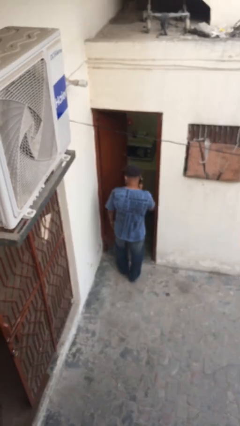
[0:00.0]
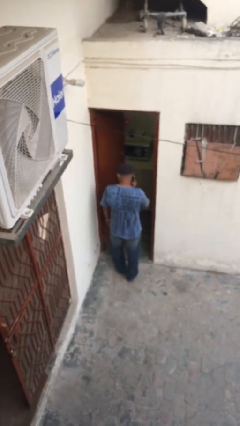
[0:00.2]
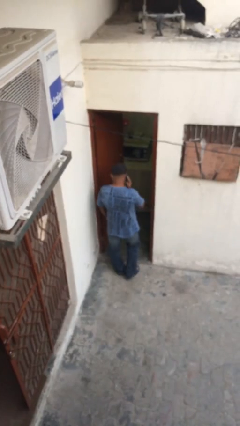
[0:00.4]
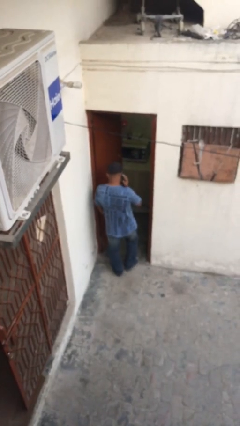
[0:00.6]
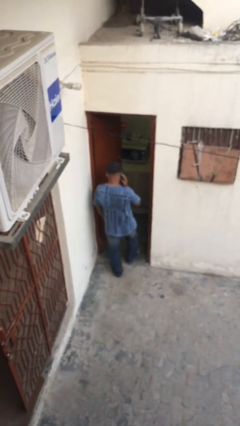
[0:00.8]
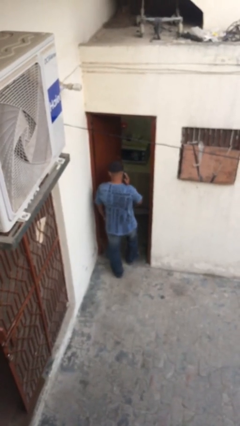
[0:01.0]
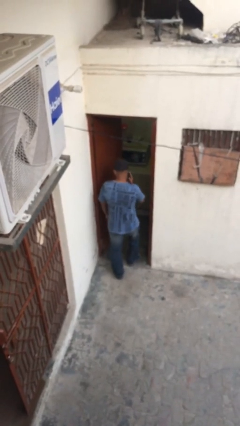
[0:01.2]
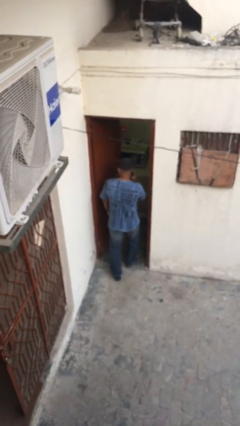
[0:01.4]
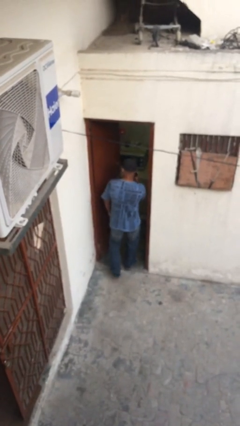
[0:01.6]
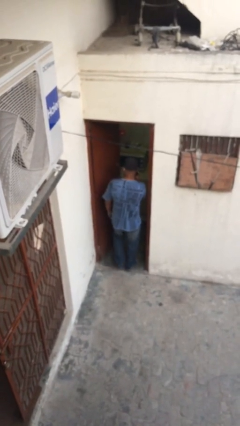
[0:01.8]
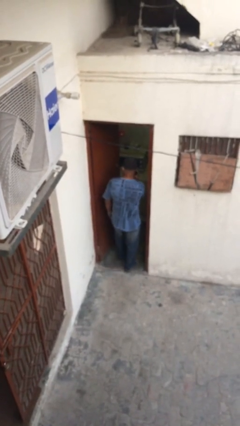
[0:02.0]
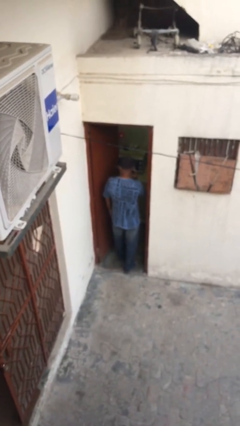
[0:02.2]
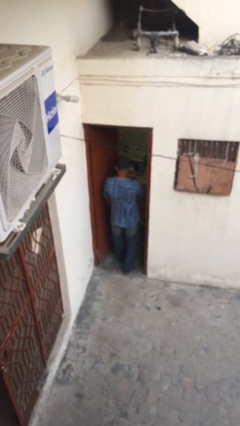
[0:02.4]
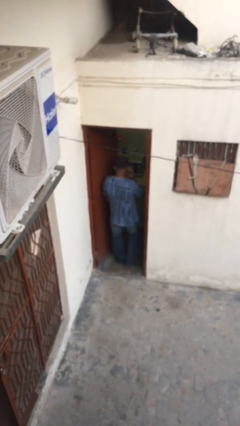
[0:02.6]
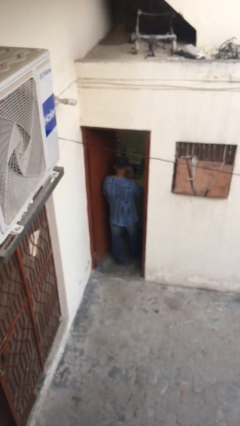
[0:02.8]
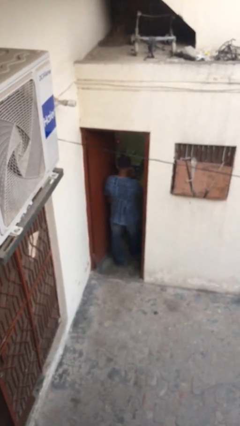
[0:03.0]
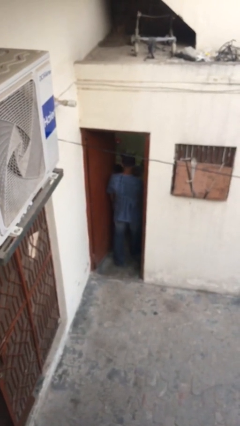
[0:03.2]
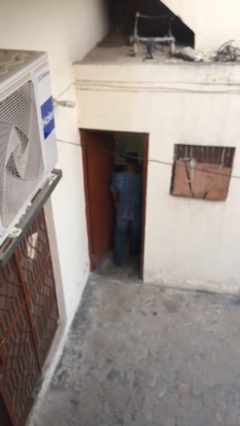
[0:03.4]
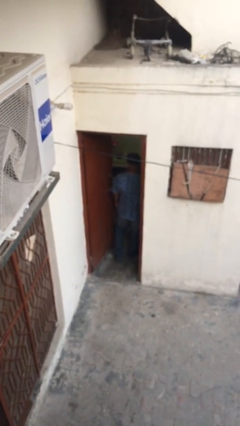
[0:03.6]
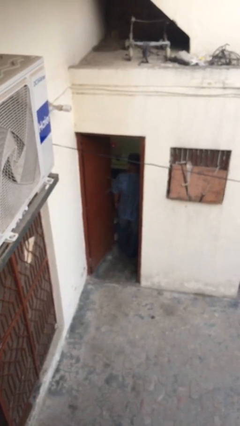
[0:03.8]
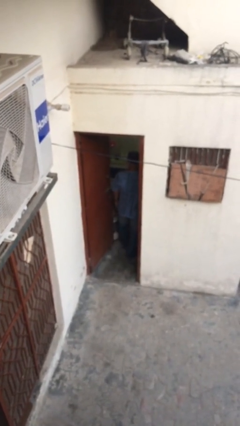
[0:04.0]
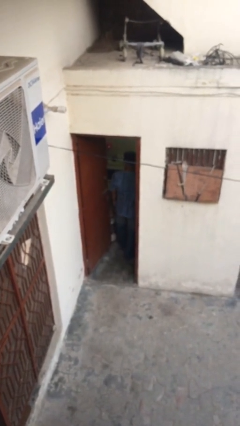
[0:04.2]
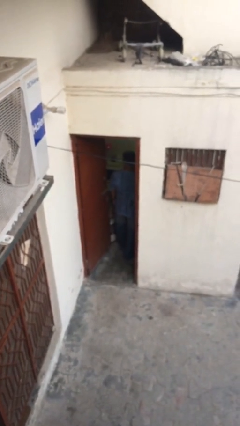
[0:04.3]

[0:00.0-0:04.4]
person exits scene through structure

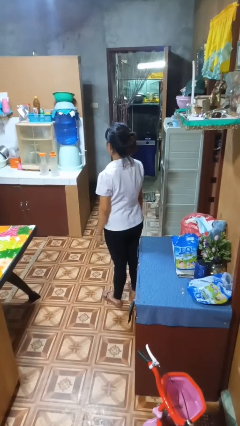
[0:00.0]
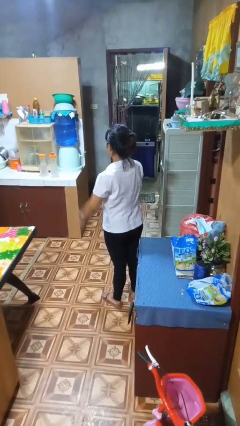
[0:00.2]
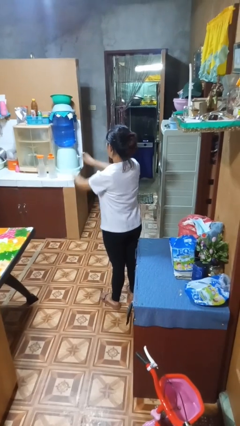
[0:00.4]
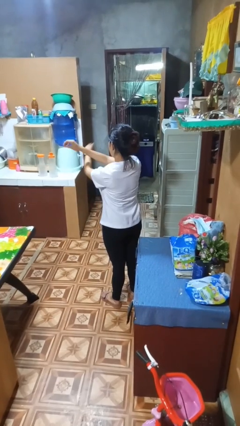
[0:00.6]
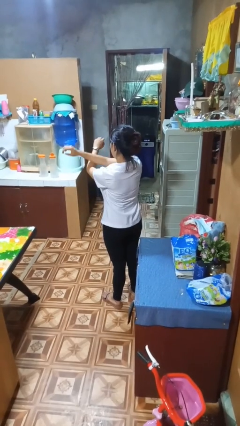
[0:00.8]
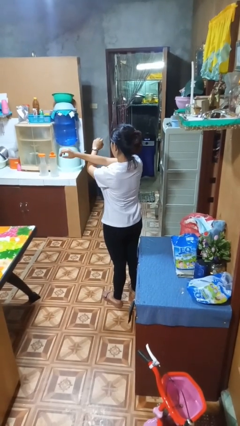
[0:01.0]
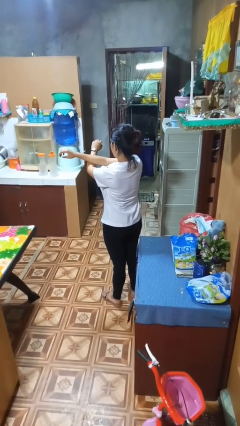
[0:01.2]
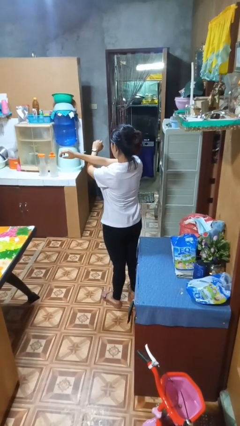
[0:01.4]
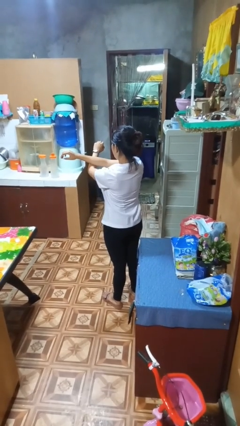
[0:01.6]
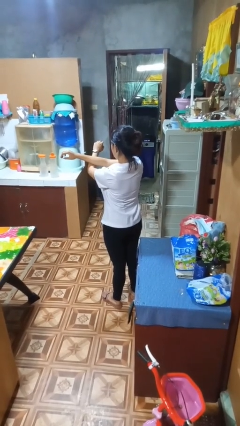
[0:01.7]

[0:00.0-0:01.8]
person crosses arms

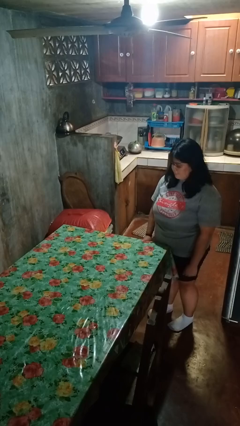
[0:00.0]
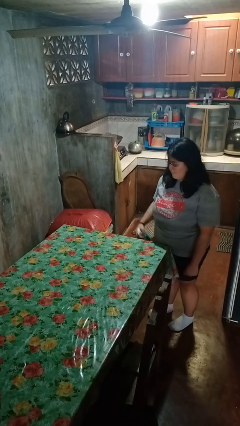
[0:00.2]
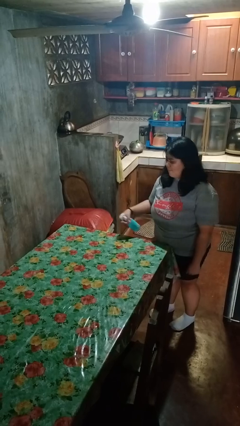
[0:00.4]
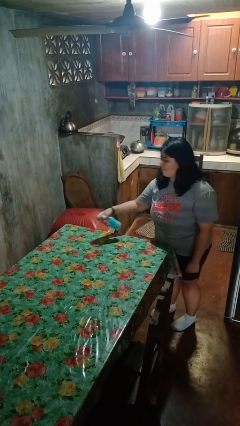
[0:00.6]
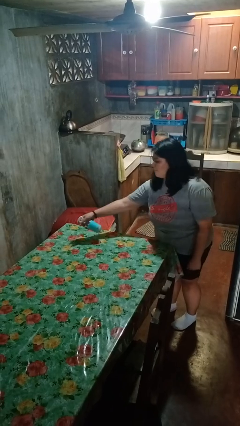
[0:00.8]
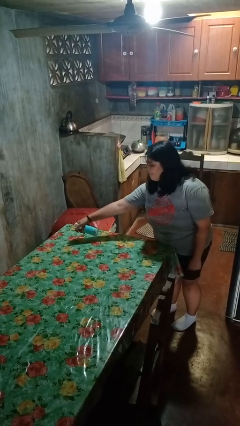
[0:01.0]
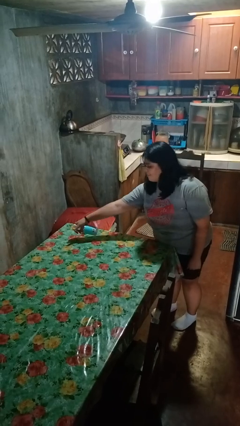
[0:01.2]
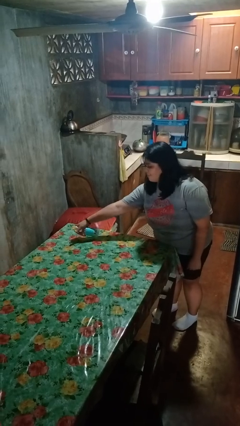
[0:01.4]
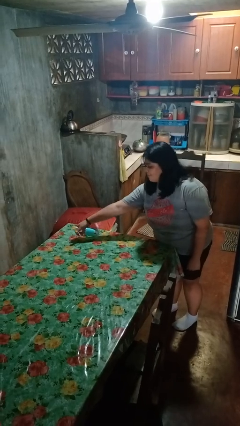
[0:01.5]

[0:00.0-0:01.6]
person sprays from bottle

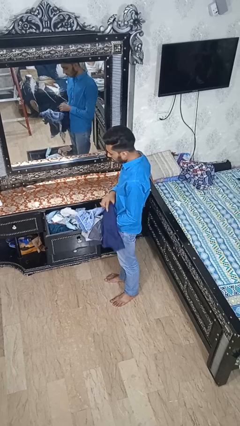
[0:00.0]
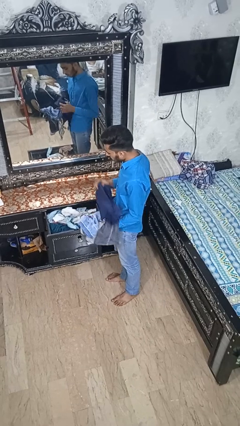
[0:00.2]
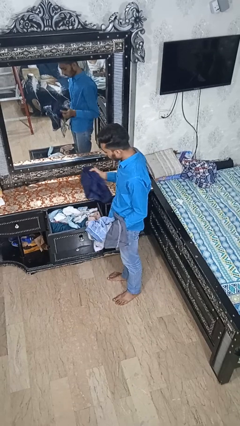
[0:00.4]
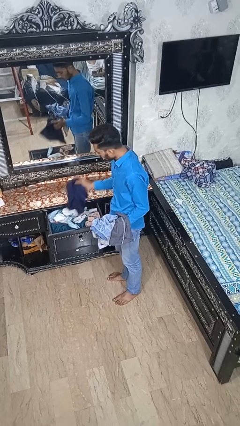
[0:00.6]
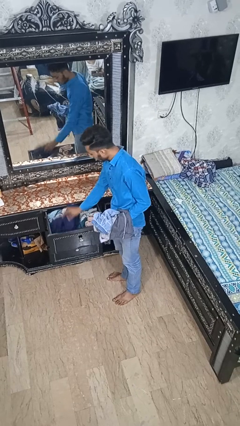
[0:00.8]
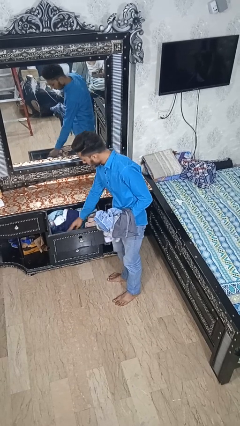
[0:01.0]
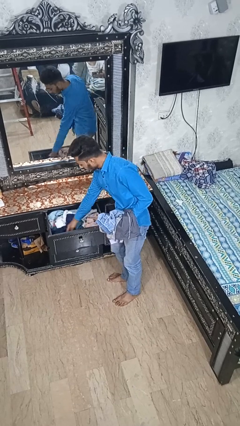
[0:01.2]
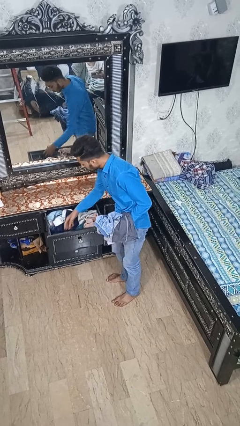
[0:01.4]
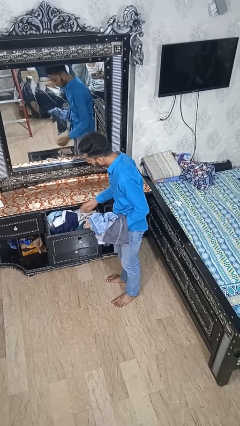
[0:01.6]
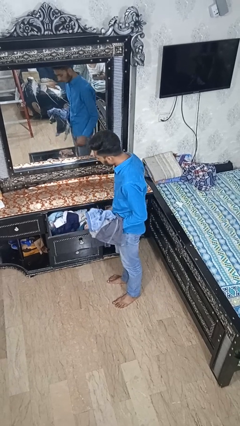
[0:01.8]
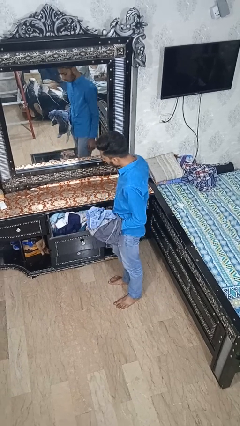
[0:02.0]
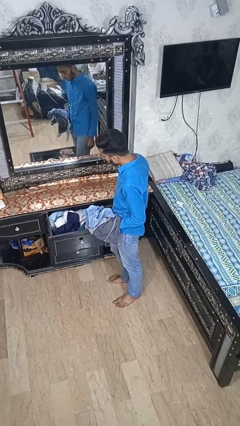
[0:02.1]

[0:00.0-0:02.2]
person puts clothes into dresser

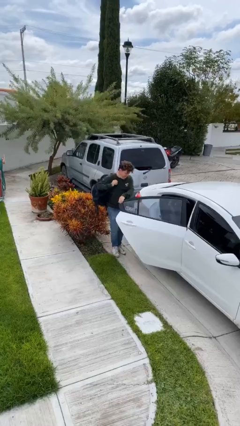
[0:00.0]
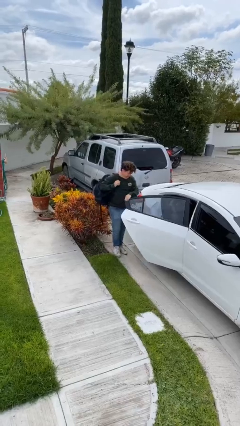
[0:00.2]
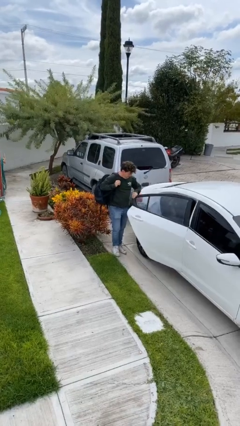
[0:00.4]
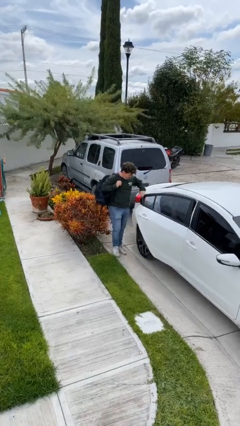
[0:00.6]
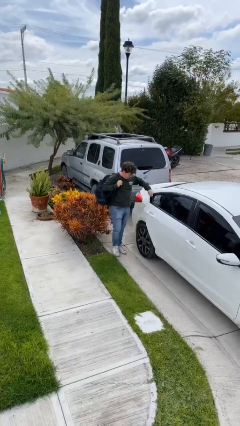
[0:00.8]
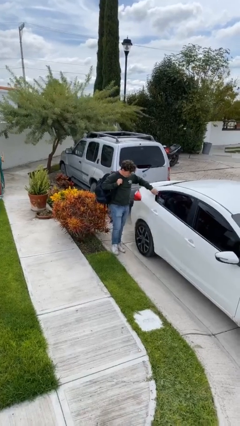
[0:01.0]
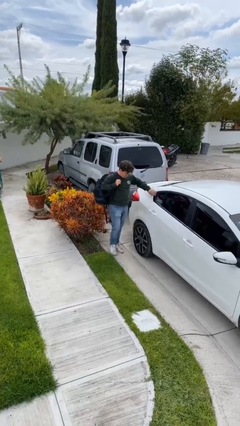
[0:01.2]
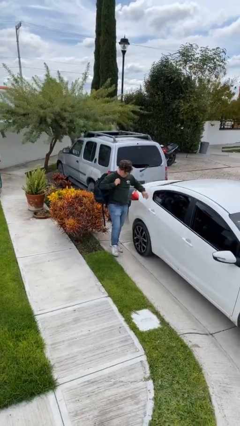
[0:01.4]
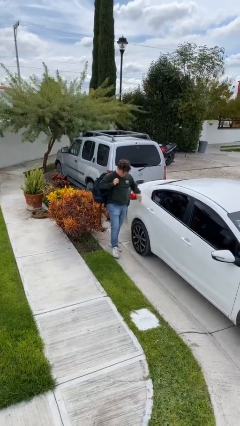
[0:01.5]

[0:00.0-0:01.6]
person closes car door

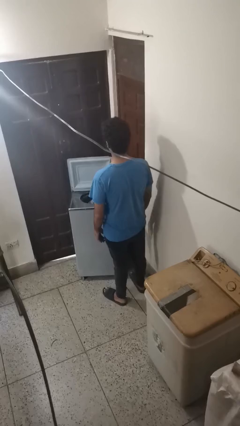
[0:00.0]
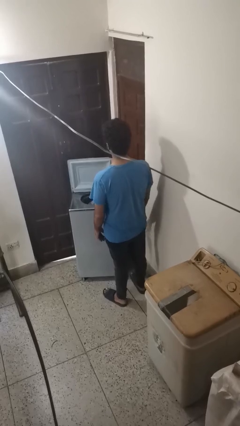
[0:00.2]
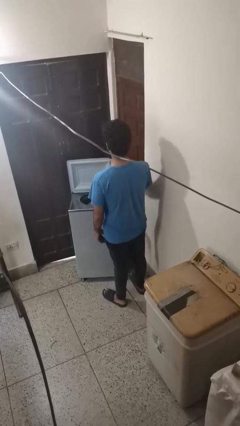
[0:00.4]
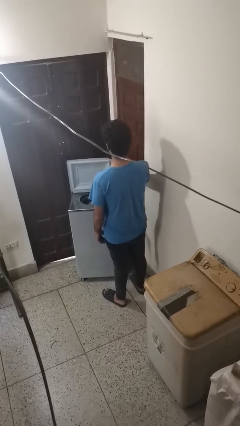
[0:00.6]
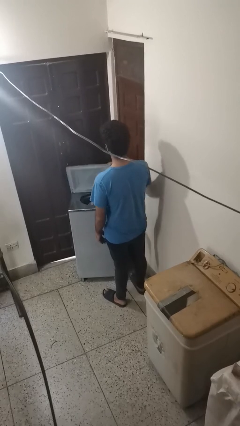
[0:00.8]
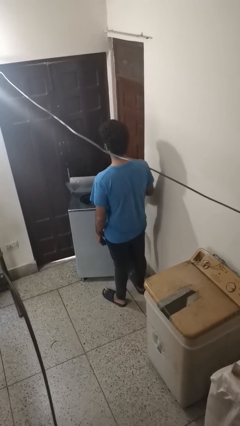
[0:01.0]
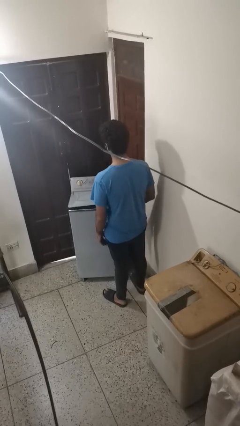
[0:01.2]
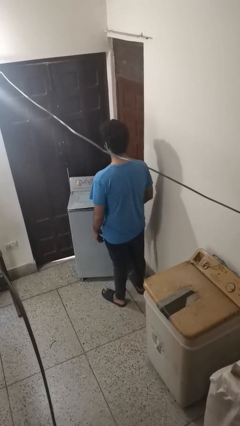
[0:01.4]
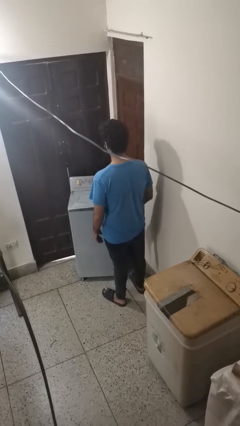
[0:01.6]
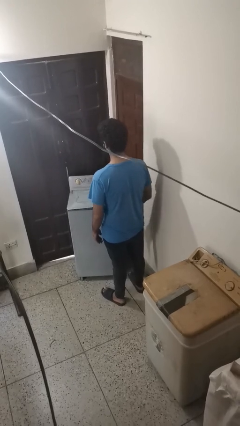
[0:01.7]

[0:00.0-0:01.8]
person closes clothes washer

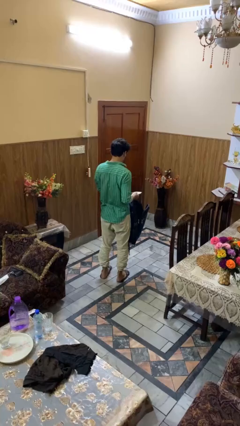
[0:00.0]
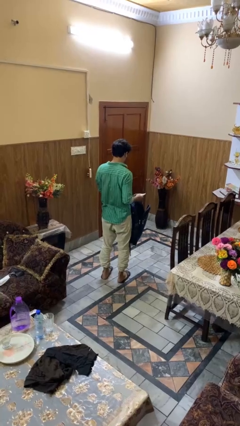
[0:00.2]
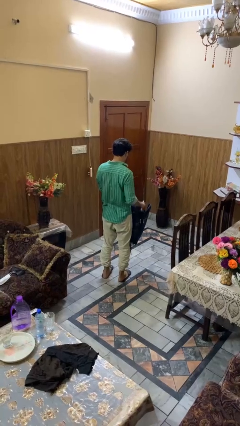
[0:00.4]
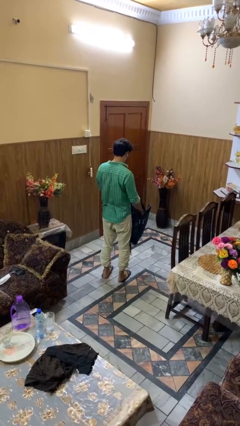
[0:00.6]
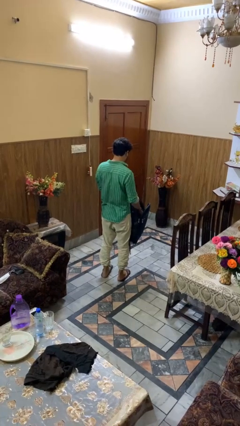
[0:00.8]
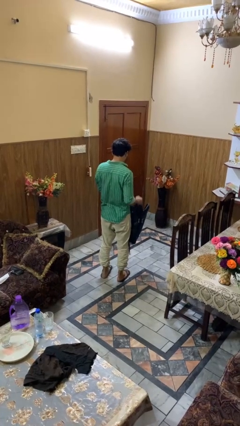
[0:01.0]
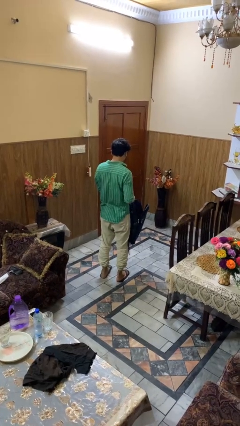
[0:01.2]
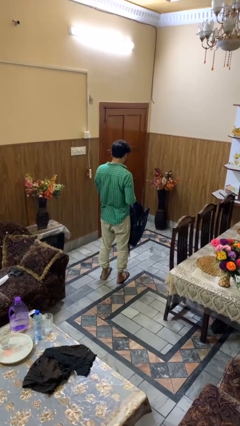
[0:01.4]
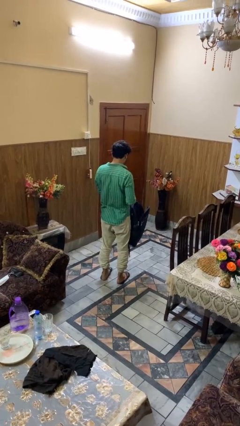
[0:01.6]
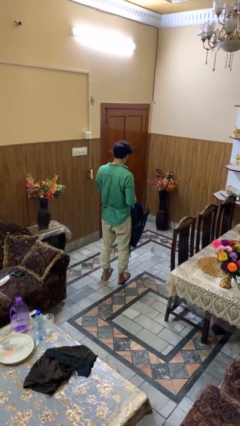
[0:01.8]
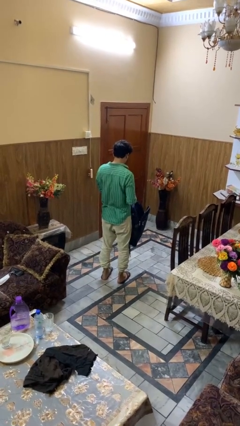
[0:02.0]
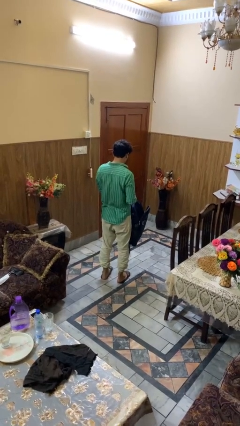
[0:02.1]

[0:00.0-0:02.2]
person puts object into backpack

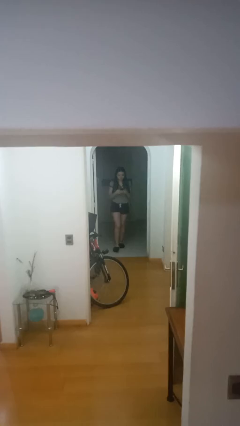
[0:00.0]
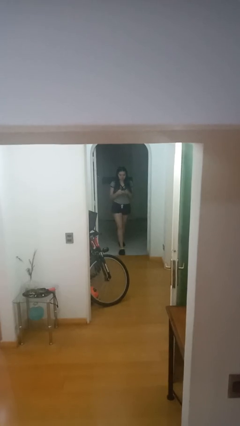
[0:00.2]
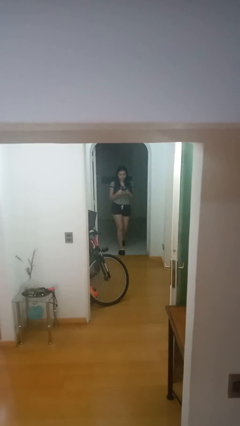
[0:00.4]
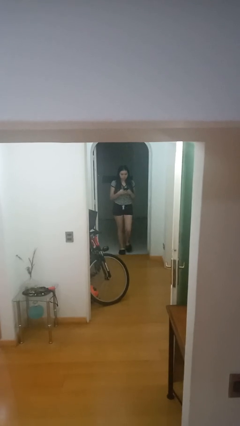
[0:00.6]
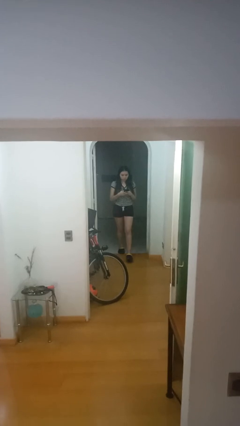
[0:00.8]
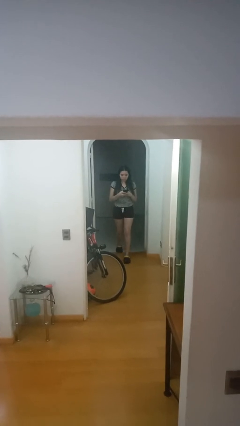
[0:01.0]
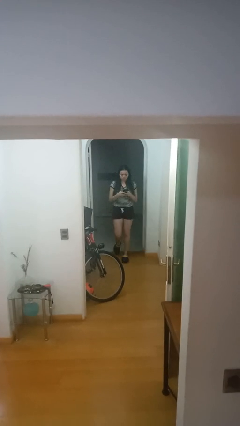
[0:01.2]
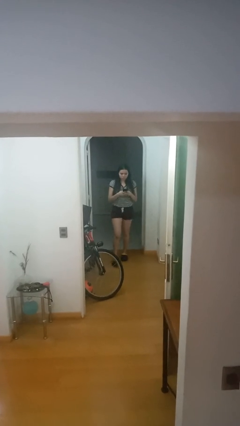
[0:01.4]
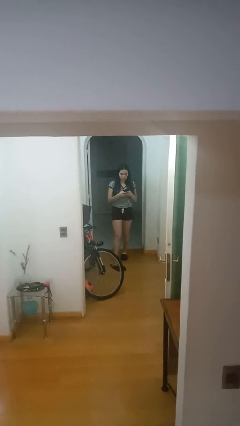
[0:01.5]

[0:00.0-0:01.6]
person enters scene through structure
